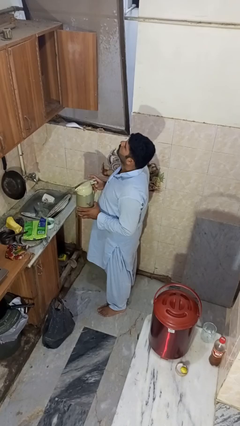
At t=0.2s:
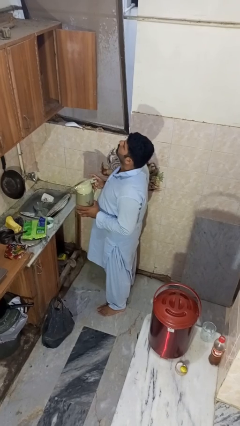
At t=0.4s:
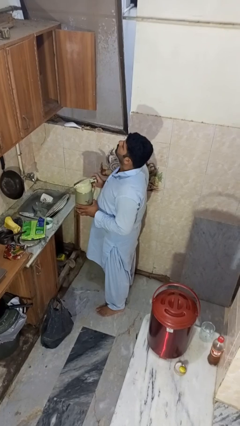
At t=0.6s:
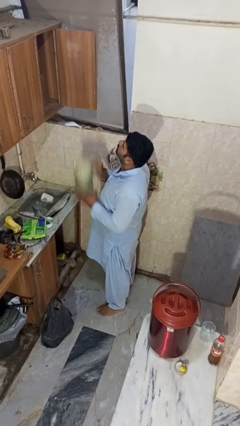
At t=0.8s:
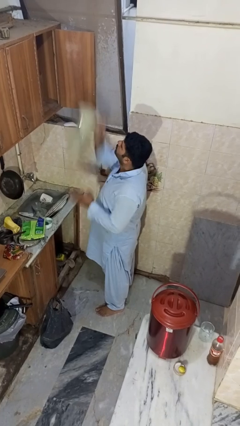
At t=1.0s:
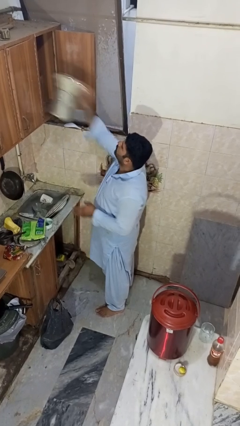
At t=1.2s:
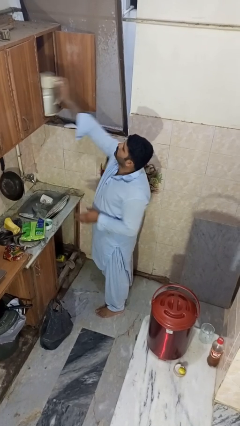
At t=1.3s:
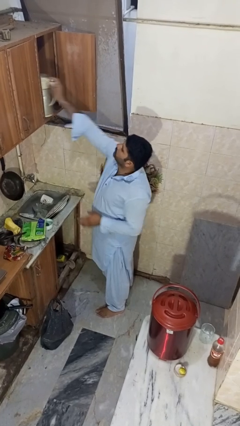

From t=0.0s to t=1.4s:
person puts object in cabinet

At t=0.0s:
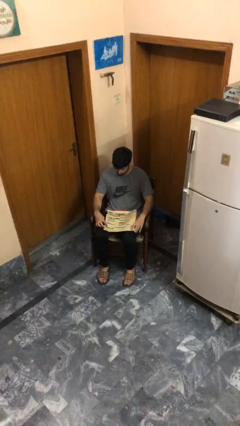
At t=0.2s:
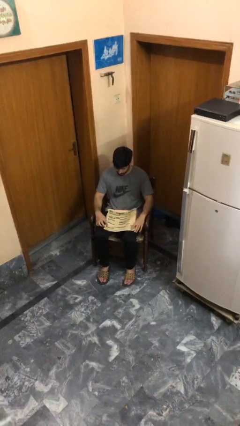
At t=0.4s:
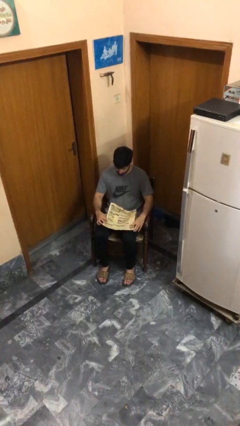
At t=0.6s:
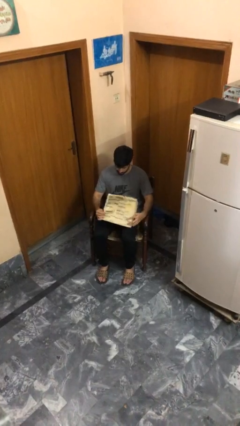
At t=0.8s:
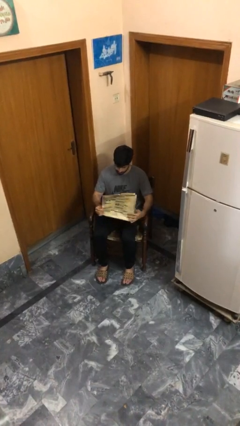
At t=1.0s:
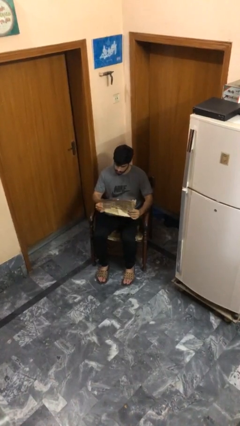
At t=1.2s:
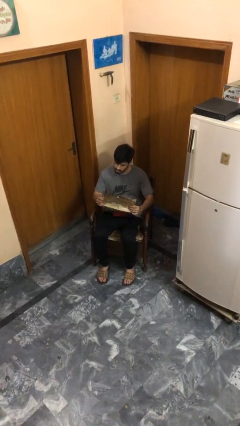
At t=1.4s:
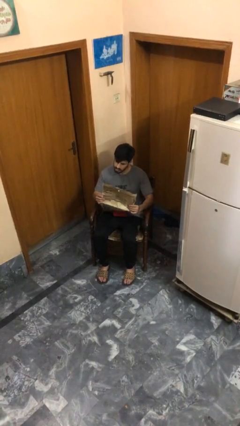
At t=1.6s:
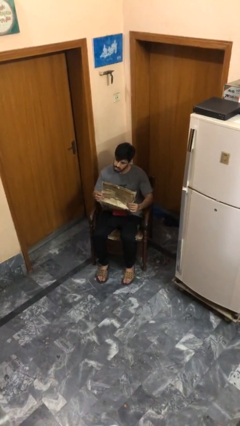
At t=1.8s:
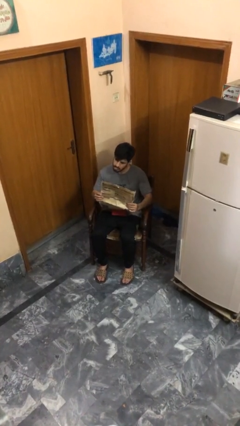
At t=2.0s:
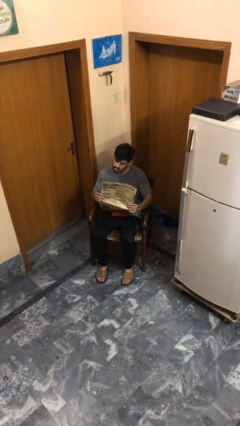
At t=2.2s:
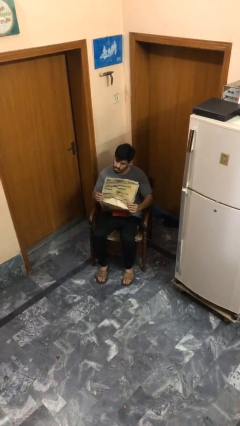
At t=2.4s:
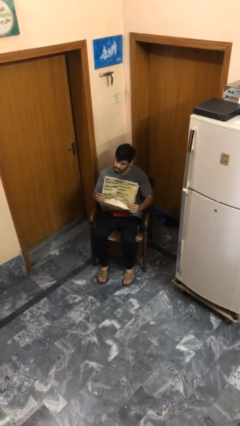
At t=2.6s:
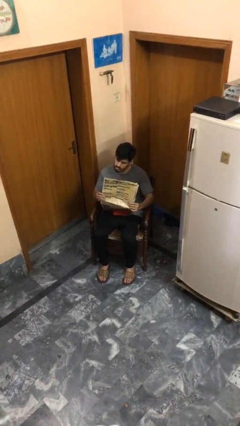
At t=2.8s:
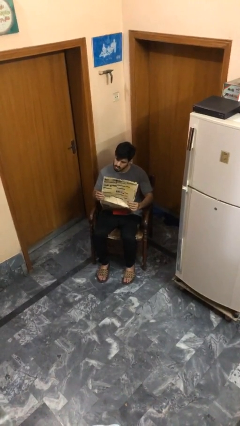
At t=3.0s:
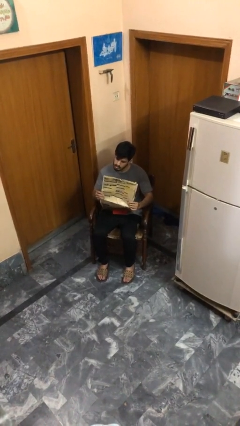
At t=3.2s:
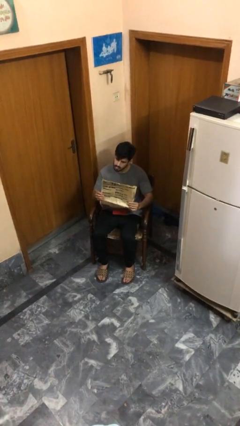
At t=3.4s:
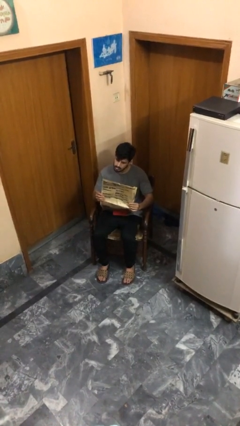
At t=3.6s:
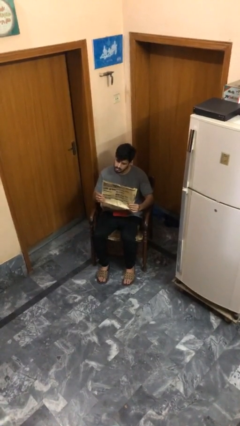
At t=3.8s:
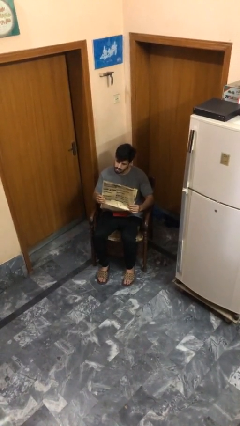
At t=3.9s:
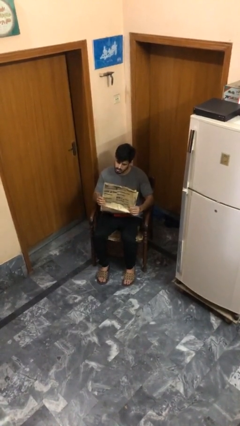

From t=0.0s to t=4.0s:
person reads newspaper

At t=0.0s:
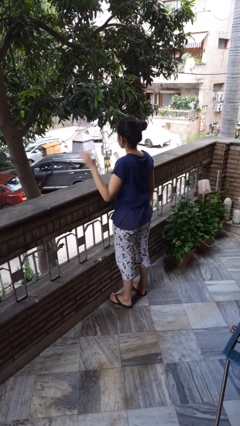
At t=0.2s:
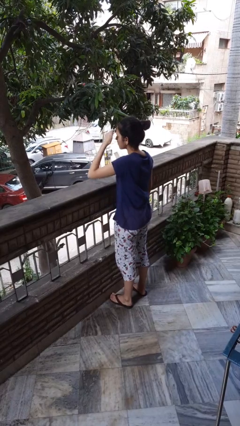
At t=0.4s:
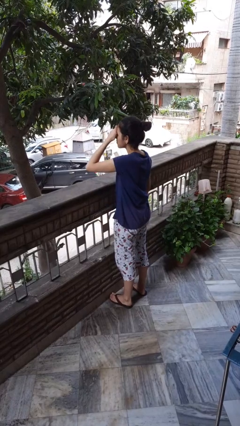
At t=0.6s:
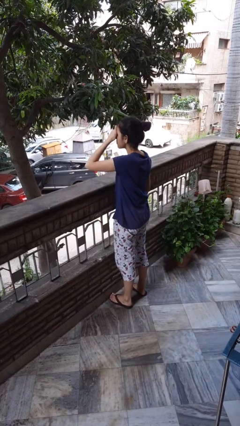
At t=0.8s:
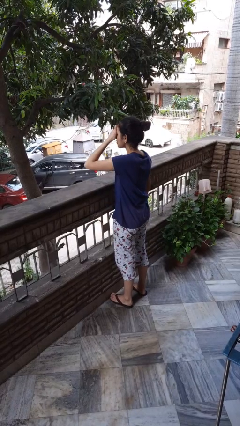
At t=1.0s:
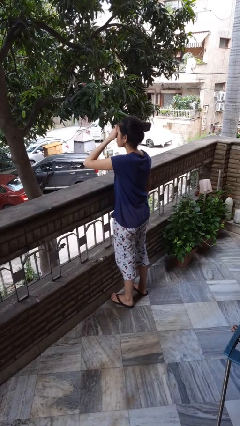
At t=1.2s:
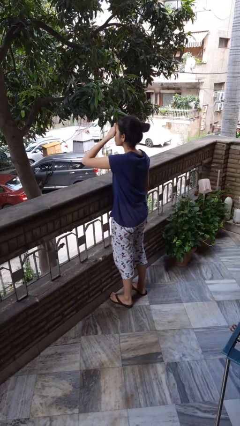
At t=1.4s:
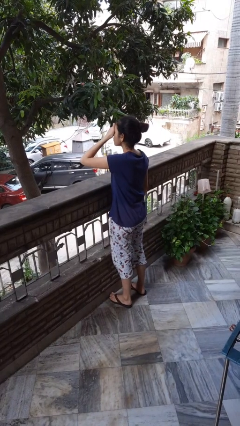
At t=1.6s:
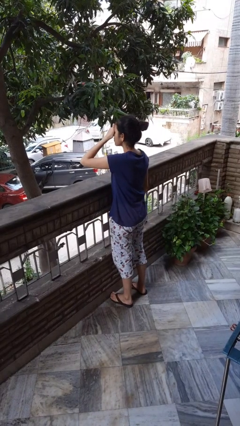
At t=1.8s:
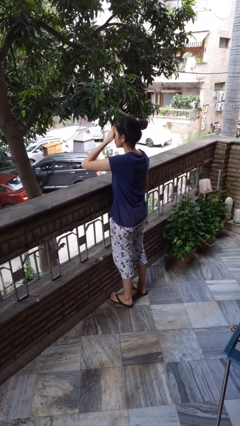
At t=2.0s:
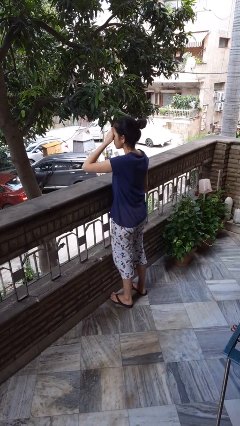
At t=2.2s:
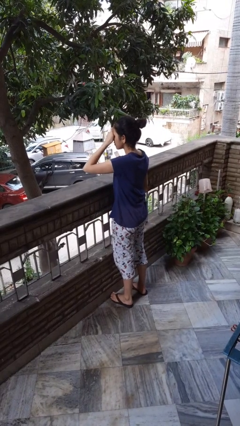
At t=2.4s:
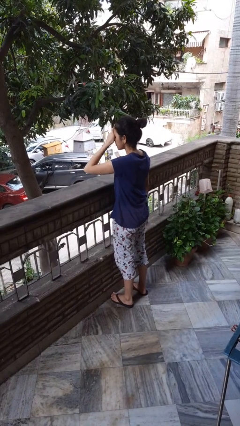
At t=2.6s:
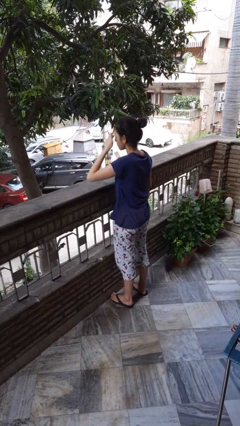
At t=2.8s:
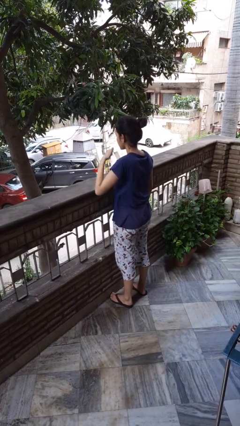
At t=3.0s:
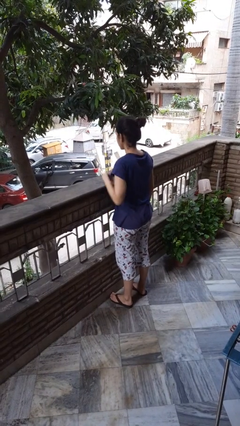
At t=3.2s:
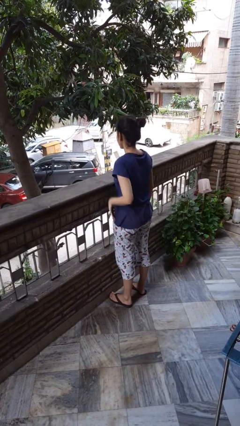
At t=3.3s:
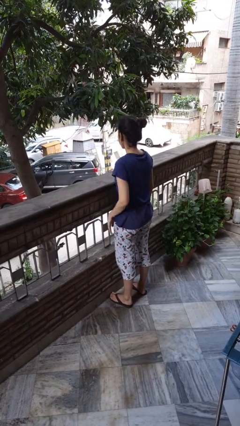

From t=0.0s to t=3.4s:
person shades eyes

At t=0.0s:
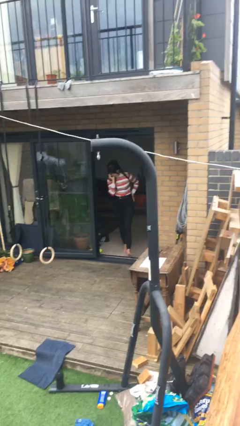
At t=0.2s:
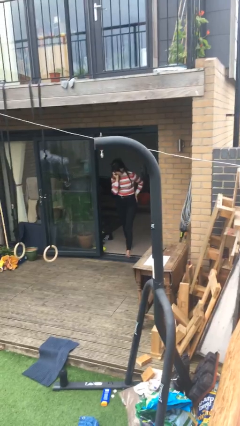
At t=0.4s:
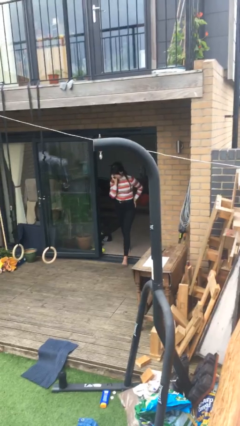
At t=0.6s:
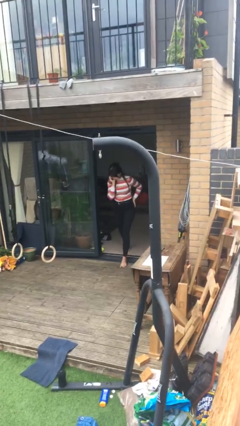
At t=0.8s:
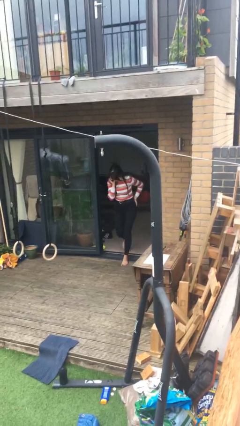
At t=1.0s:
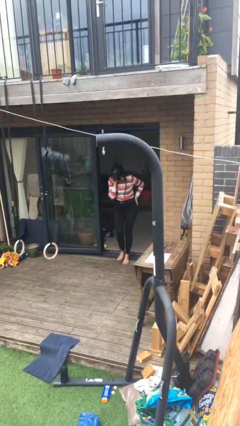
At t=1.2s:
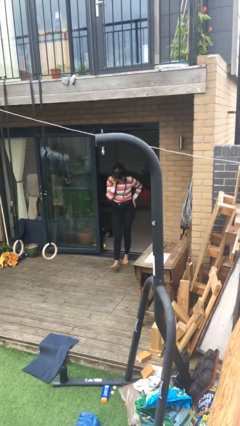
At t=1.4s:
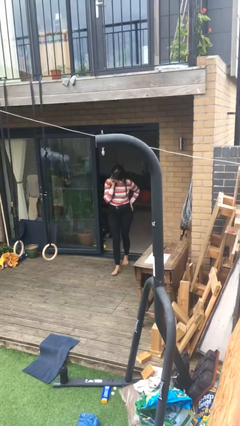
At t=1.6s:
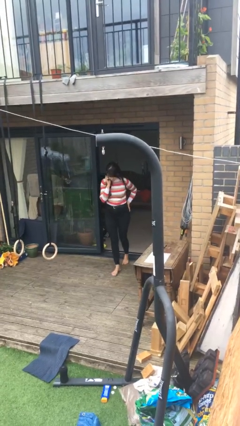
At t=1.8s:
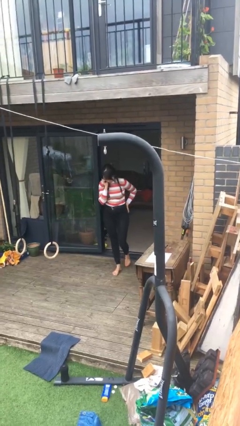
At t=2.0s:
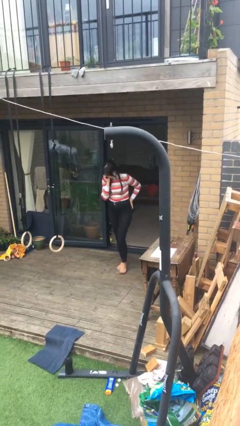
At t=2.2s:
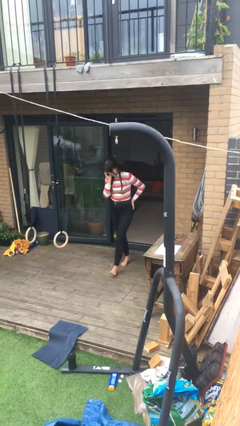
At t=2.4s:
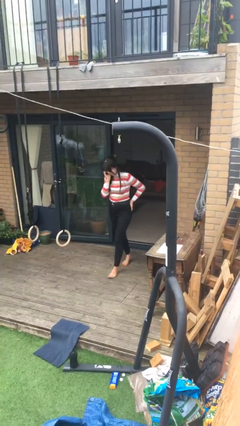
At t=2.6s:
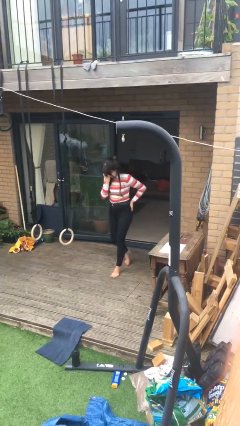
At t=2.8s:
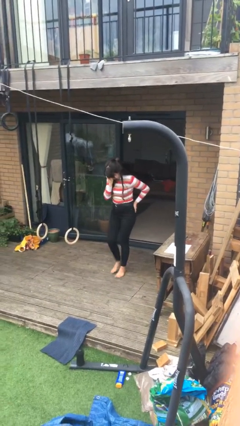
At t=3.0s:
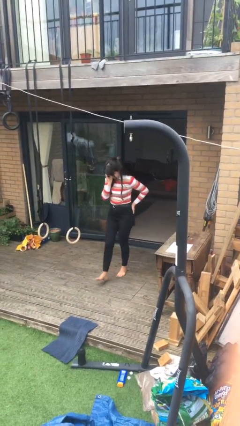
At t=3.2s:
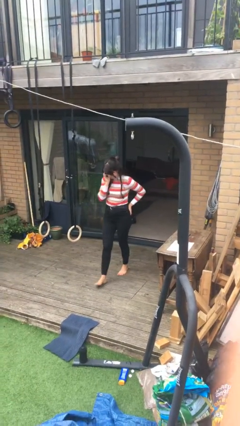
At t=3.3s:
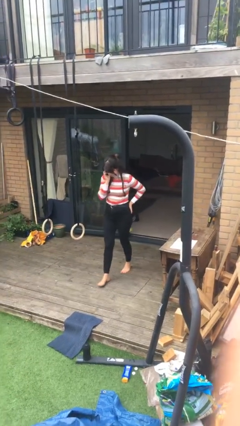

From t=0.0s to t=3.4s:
person enters scene through structure

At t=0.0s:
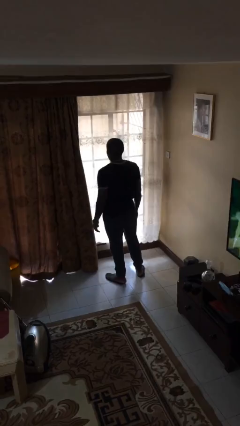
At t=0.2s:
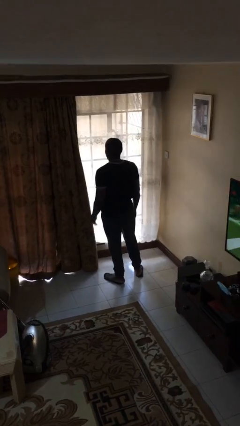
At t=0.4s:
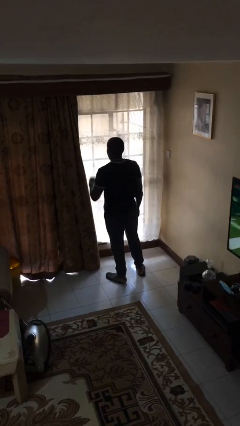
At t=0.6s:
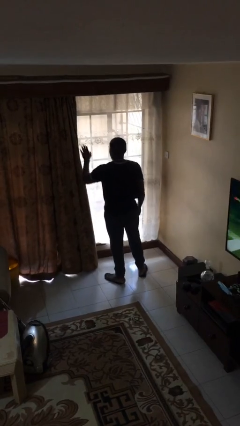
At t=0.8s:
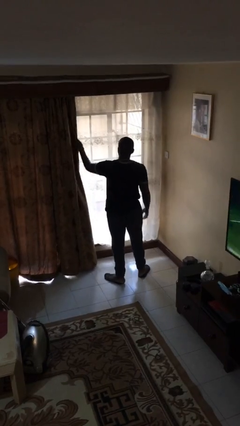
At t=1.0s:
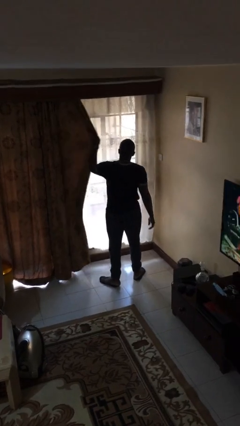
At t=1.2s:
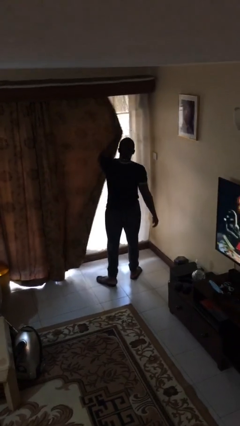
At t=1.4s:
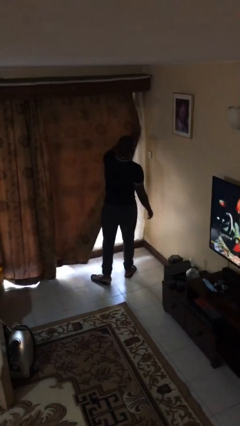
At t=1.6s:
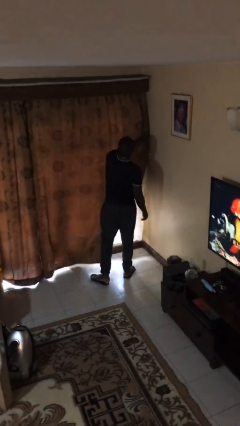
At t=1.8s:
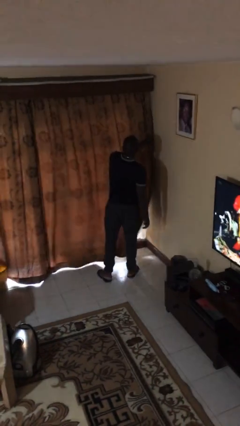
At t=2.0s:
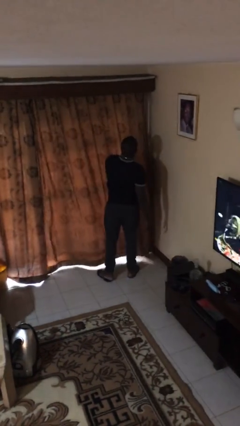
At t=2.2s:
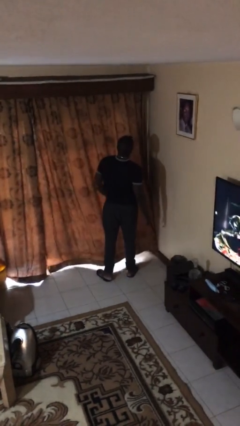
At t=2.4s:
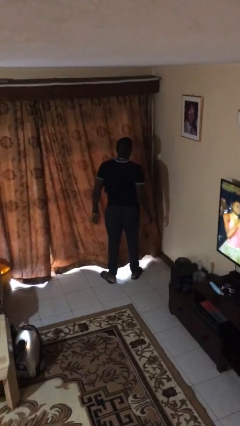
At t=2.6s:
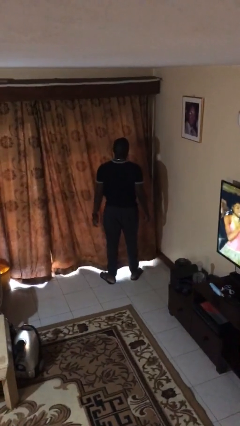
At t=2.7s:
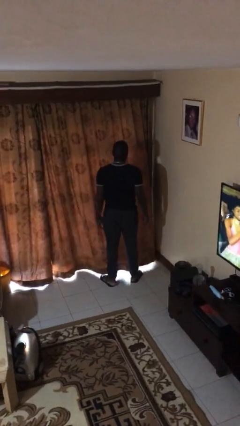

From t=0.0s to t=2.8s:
person closes curtains

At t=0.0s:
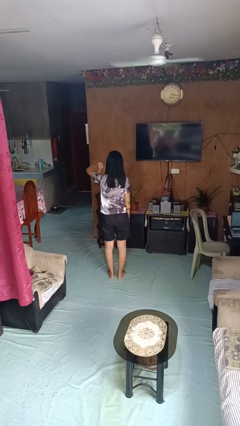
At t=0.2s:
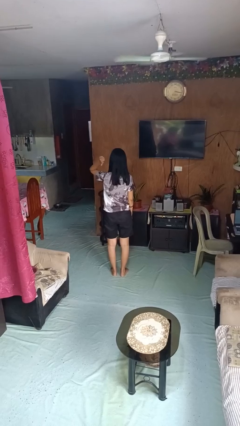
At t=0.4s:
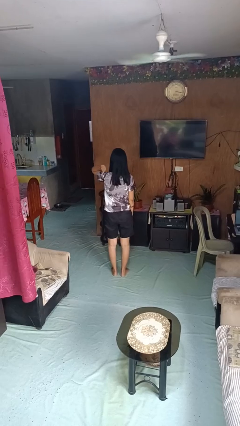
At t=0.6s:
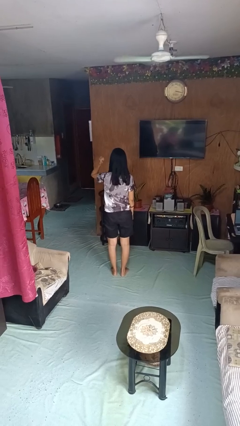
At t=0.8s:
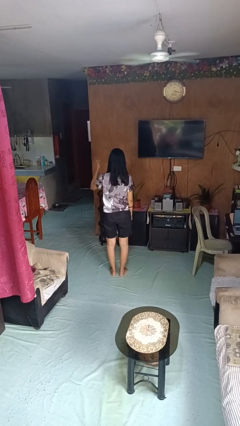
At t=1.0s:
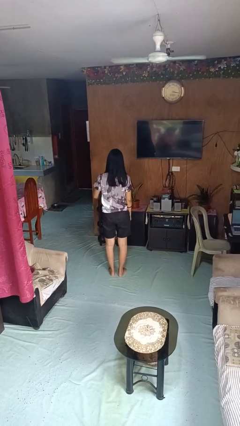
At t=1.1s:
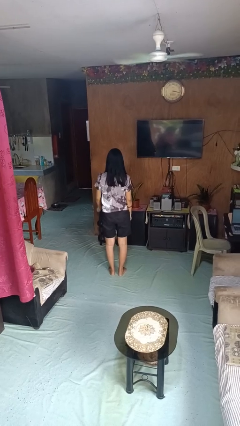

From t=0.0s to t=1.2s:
person gestures behind me

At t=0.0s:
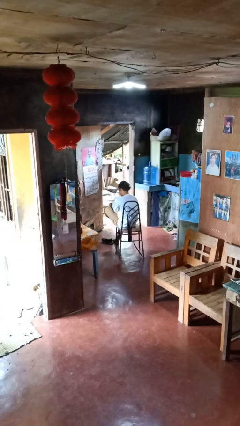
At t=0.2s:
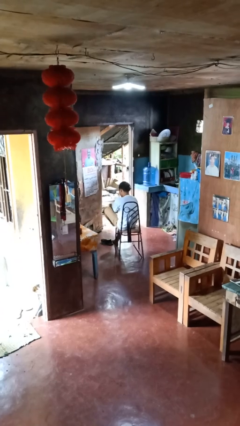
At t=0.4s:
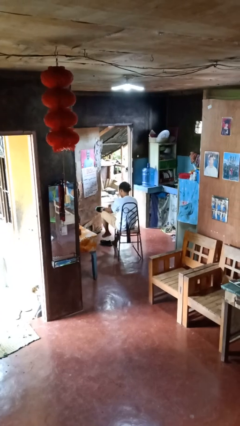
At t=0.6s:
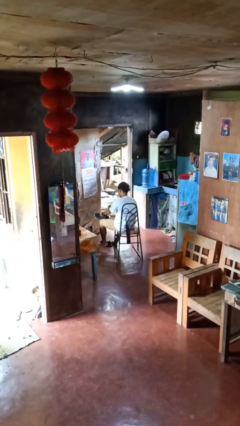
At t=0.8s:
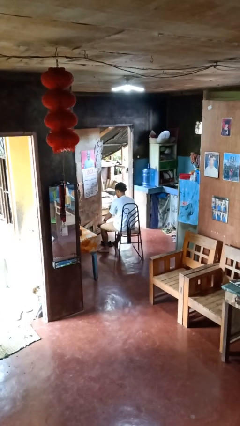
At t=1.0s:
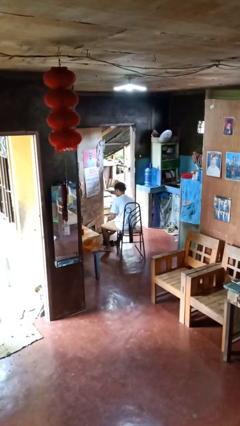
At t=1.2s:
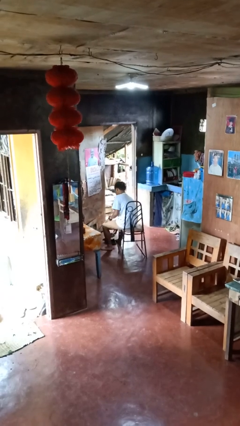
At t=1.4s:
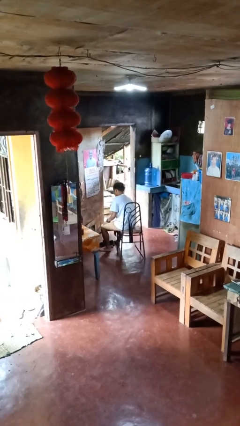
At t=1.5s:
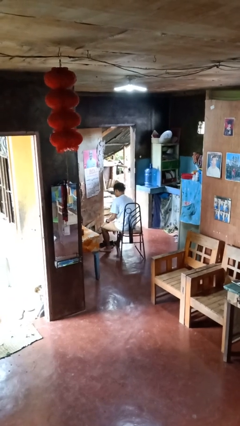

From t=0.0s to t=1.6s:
person takes off shoes
